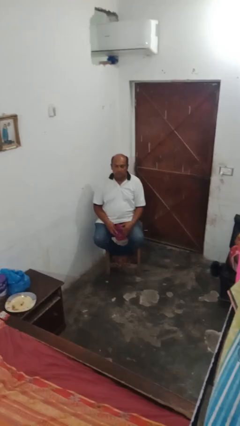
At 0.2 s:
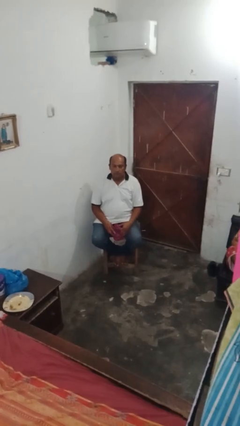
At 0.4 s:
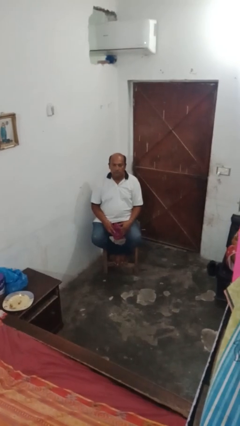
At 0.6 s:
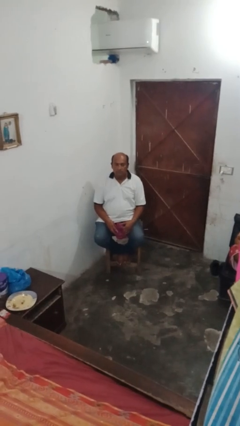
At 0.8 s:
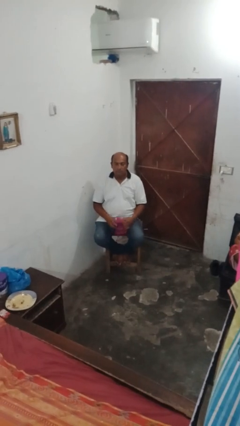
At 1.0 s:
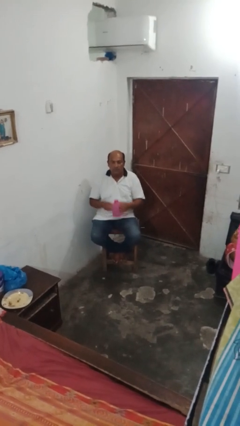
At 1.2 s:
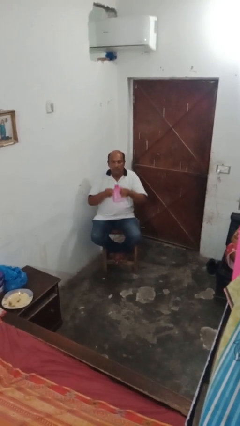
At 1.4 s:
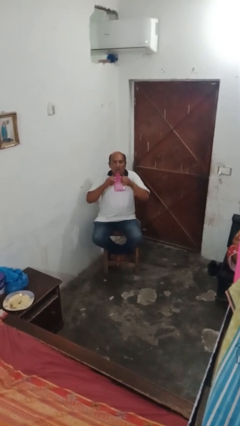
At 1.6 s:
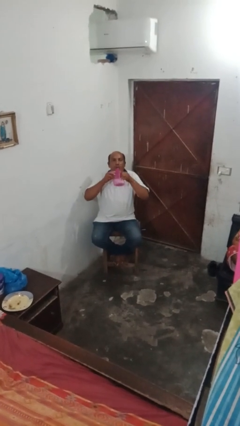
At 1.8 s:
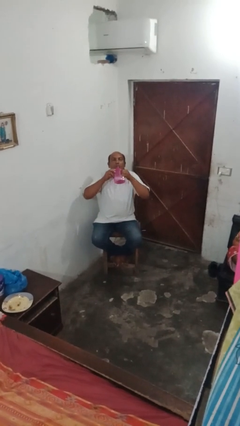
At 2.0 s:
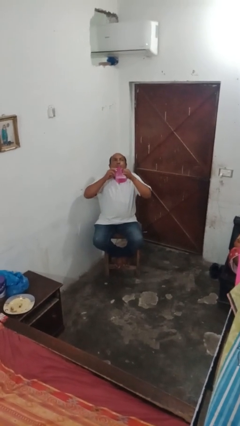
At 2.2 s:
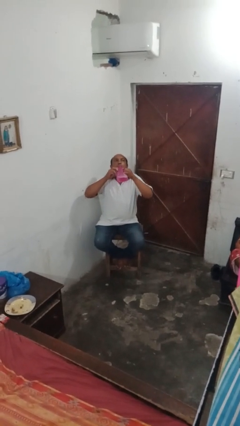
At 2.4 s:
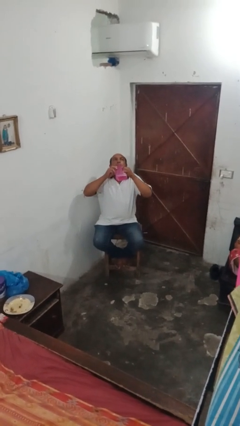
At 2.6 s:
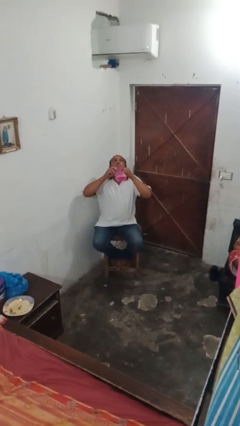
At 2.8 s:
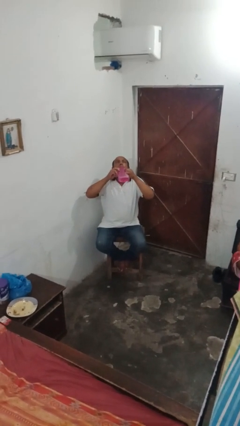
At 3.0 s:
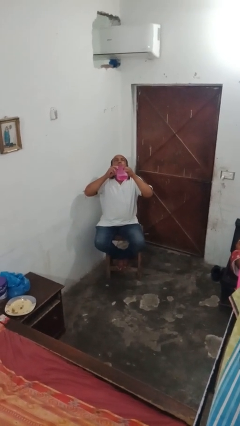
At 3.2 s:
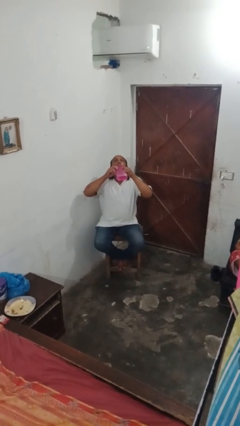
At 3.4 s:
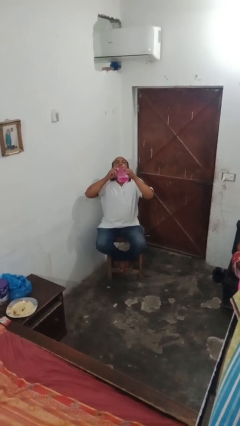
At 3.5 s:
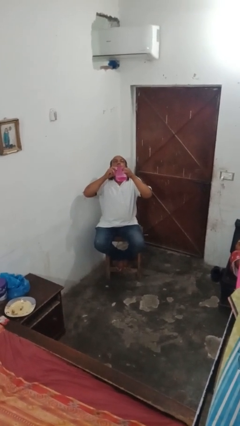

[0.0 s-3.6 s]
person drinks from bottle

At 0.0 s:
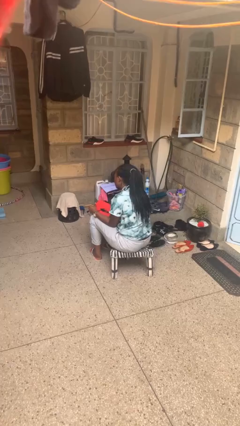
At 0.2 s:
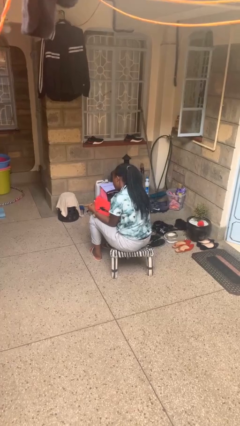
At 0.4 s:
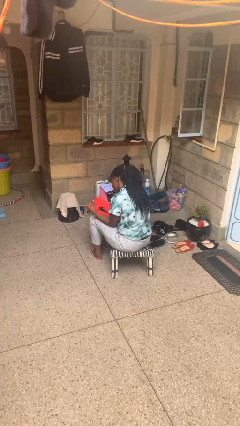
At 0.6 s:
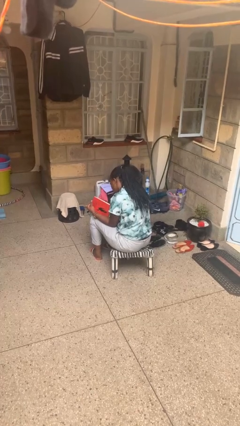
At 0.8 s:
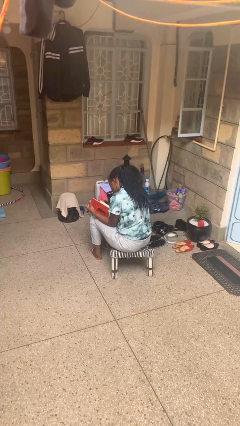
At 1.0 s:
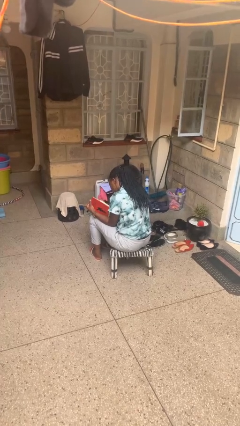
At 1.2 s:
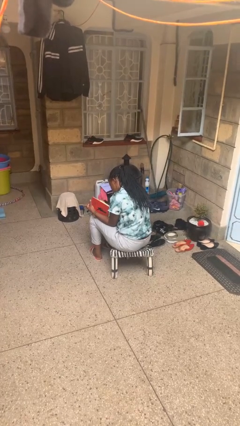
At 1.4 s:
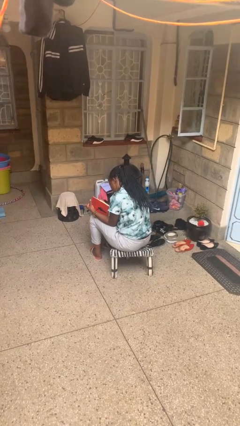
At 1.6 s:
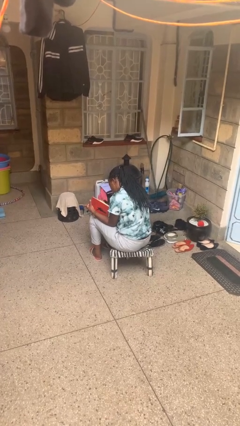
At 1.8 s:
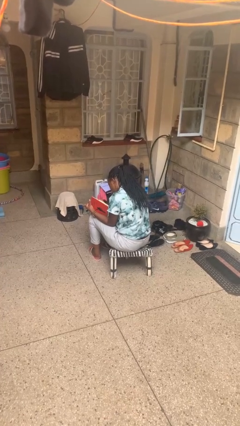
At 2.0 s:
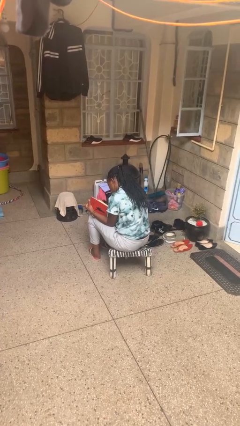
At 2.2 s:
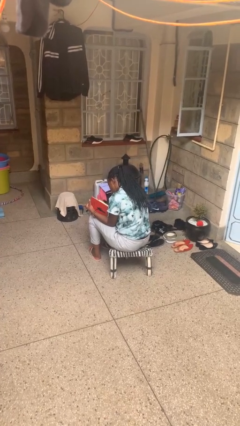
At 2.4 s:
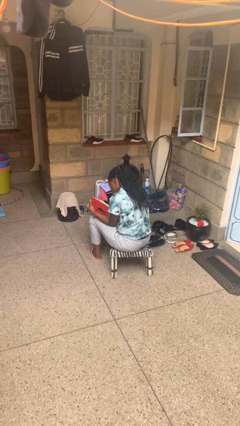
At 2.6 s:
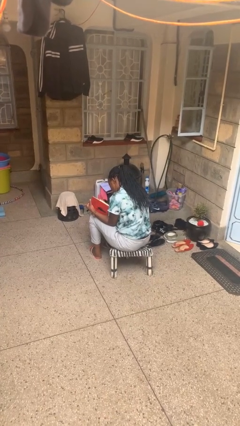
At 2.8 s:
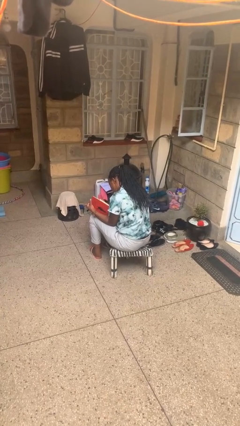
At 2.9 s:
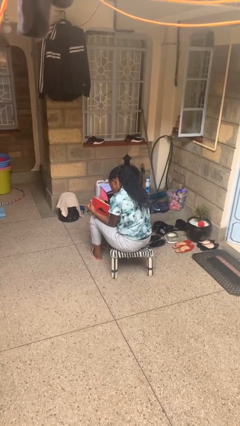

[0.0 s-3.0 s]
person reads book

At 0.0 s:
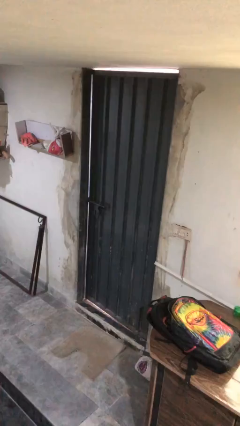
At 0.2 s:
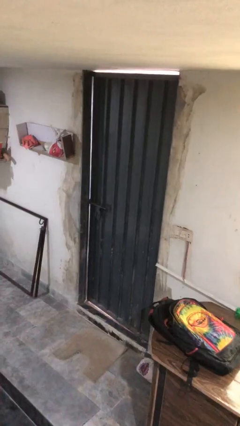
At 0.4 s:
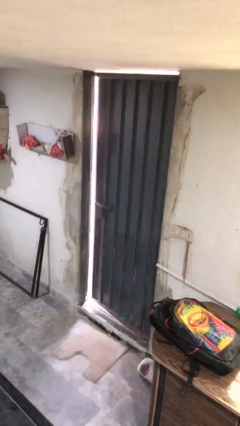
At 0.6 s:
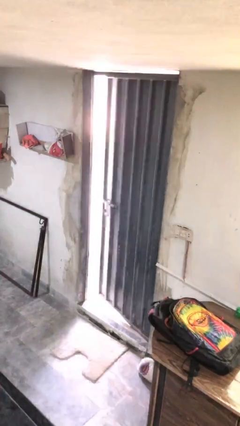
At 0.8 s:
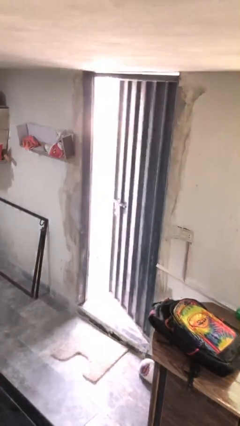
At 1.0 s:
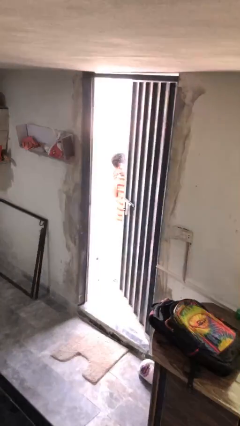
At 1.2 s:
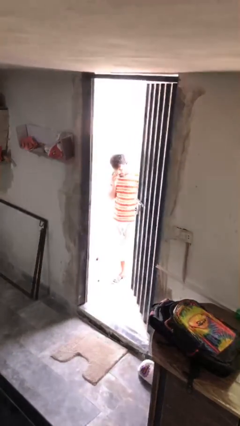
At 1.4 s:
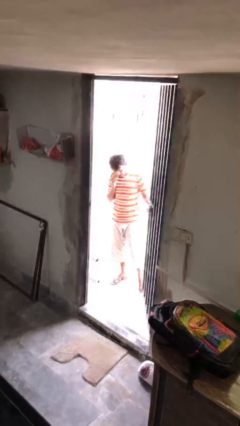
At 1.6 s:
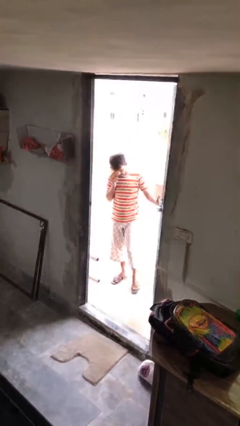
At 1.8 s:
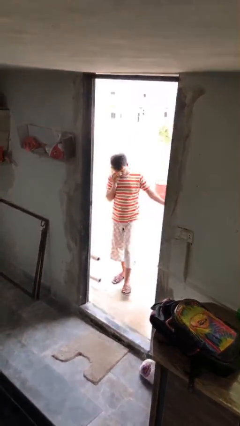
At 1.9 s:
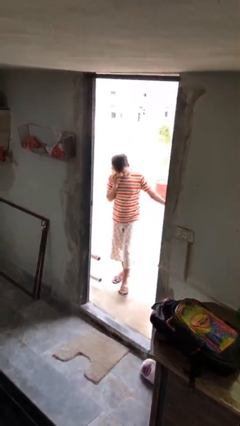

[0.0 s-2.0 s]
person opens facility door

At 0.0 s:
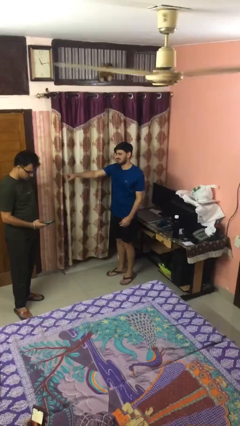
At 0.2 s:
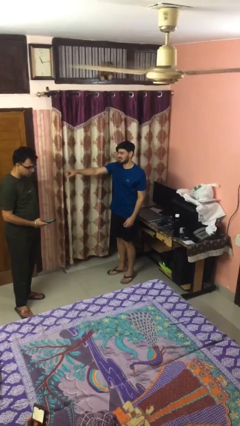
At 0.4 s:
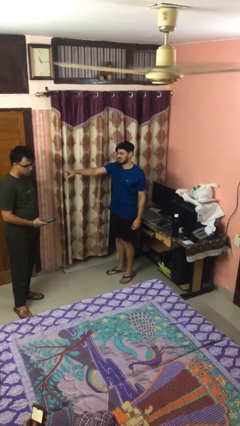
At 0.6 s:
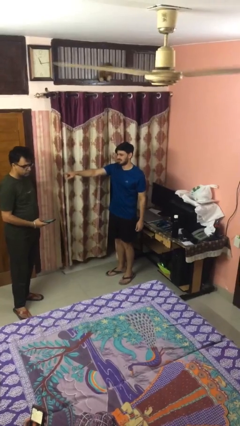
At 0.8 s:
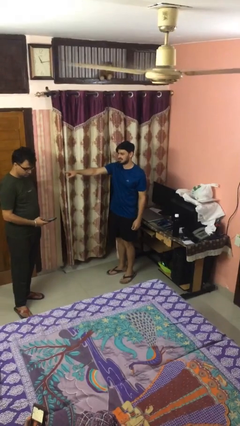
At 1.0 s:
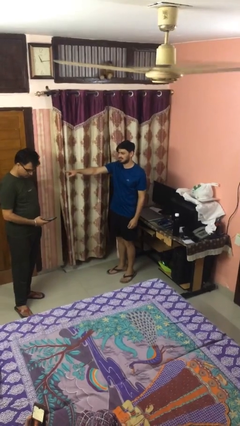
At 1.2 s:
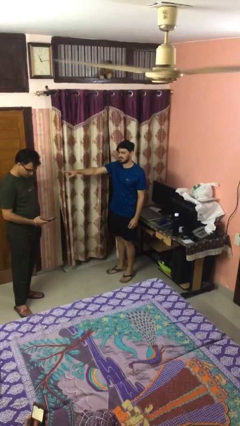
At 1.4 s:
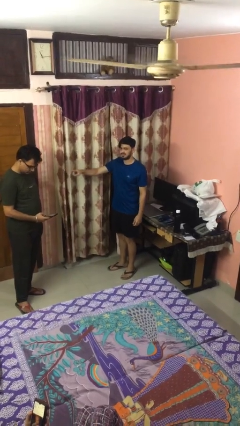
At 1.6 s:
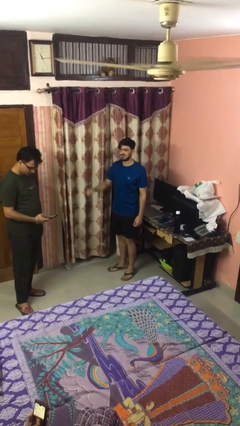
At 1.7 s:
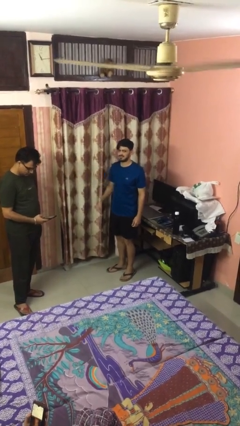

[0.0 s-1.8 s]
person points at person

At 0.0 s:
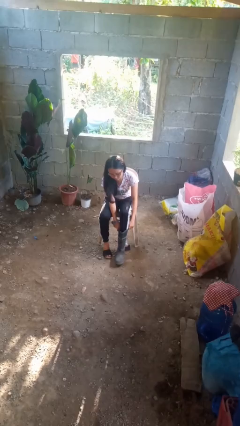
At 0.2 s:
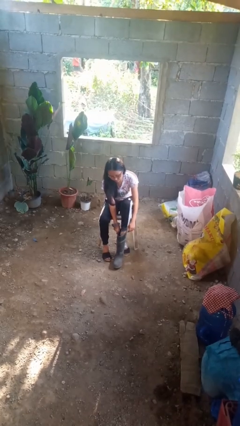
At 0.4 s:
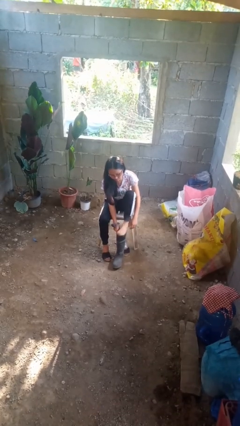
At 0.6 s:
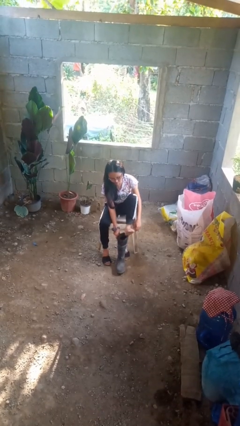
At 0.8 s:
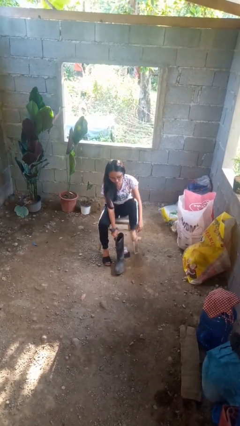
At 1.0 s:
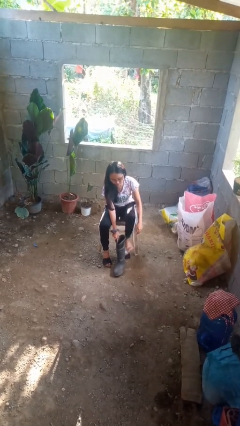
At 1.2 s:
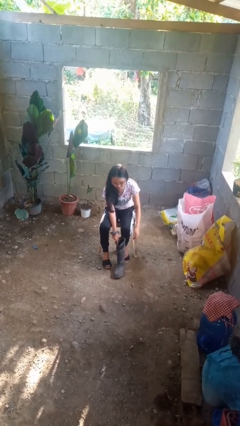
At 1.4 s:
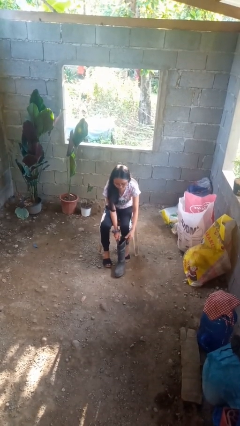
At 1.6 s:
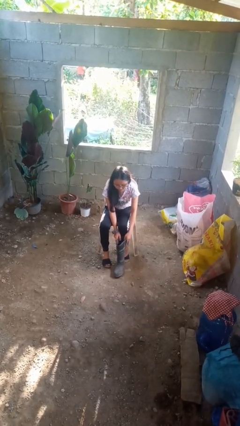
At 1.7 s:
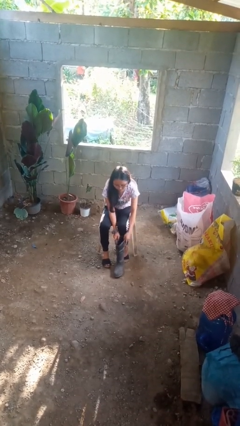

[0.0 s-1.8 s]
person takes off boots

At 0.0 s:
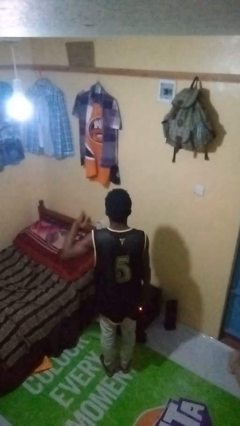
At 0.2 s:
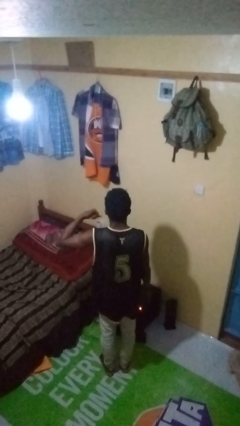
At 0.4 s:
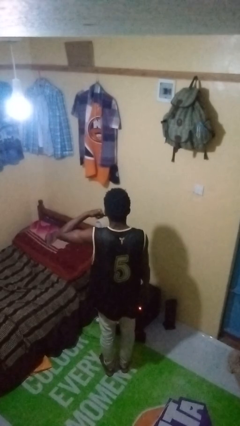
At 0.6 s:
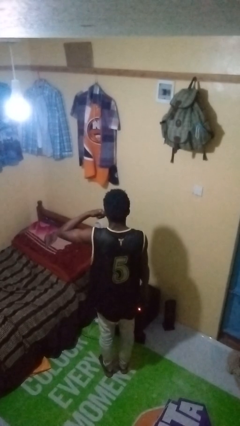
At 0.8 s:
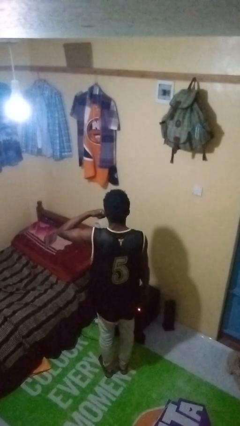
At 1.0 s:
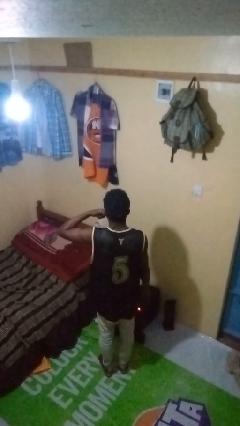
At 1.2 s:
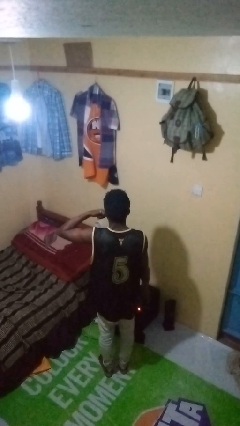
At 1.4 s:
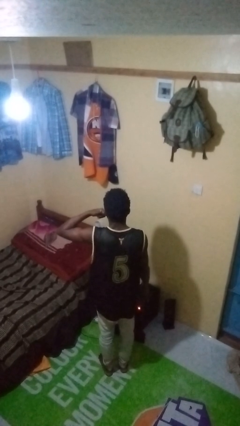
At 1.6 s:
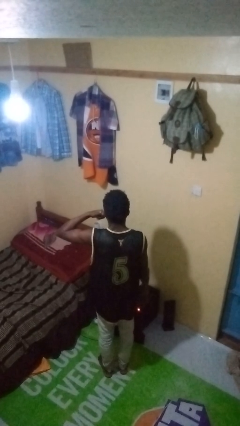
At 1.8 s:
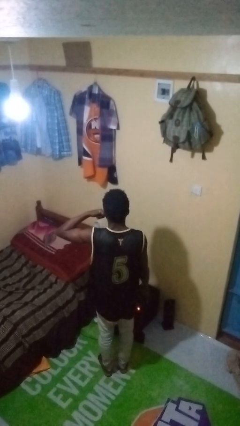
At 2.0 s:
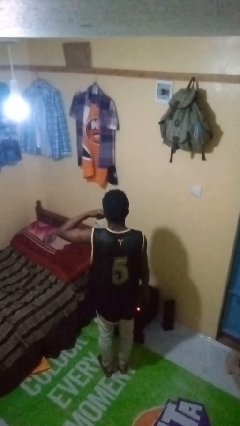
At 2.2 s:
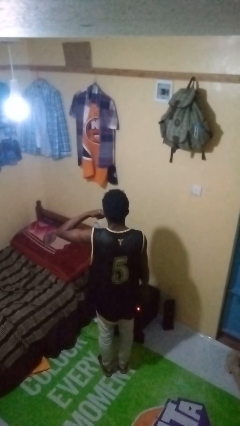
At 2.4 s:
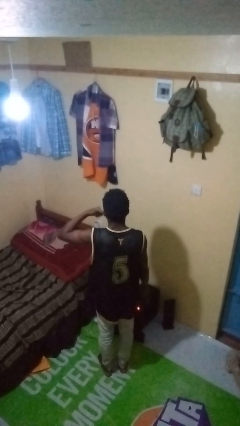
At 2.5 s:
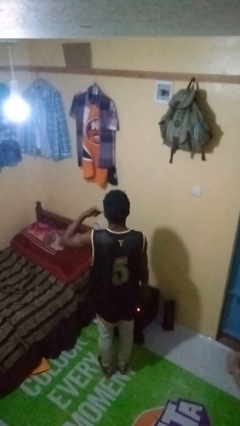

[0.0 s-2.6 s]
person gestures call me

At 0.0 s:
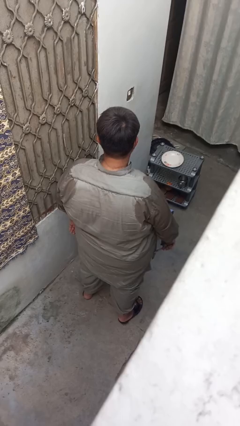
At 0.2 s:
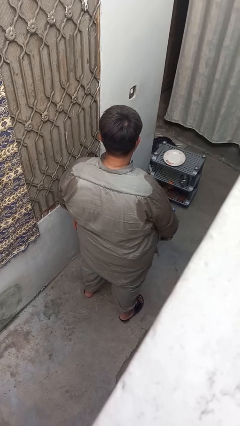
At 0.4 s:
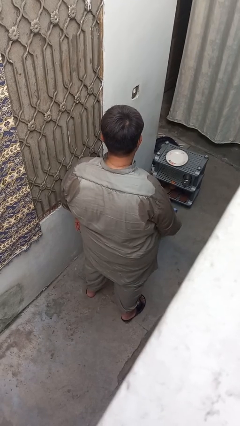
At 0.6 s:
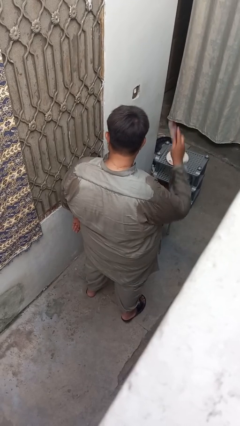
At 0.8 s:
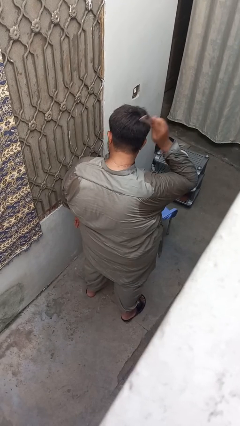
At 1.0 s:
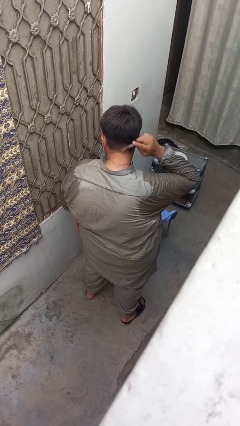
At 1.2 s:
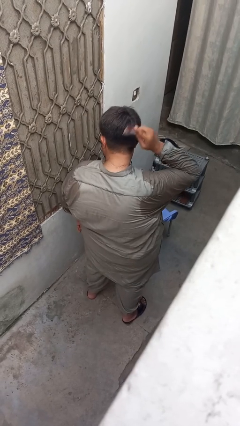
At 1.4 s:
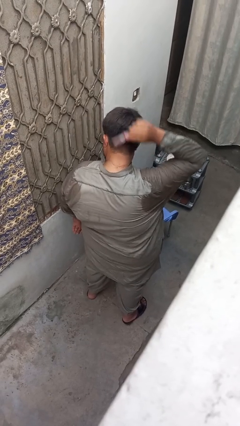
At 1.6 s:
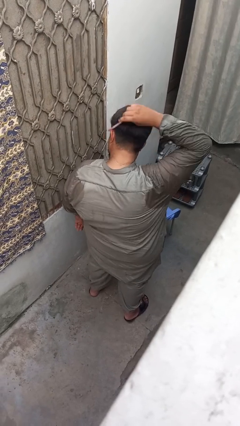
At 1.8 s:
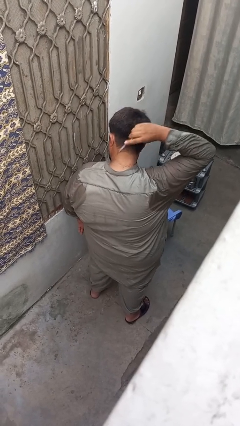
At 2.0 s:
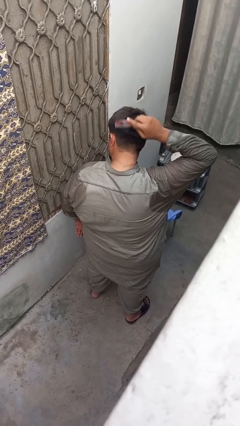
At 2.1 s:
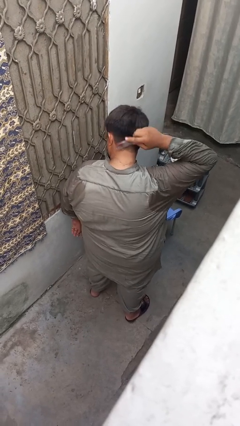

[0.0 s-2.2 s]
person brushes hair

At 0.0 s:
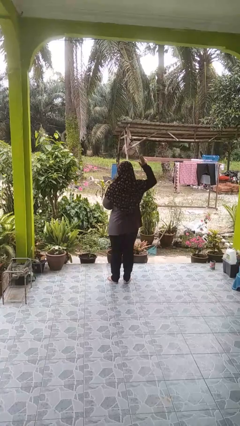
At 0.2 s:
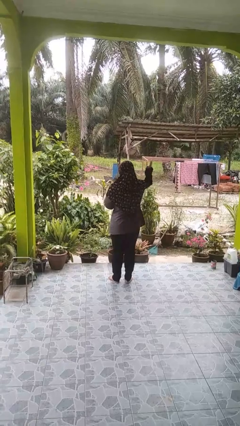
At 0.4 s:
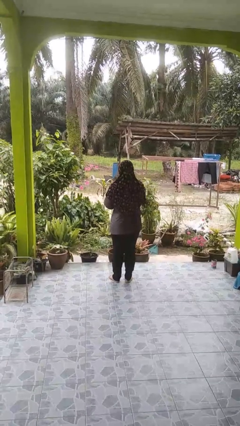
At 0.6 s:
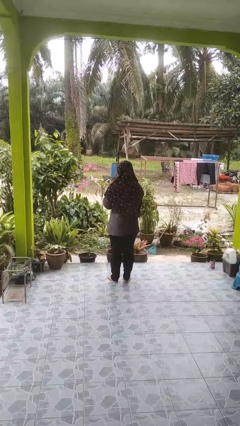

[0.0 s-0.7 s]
person karate chop
